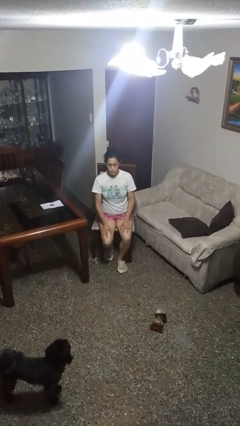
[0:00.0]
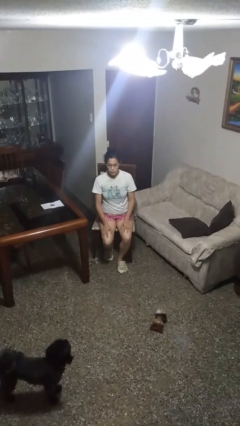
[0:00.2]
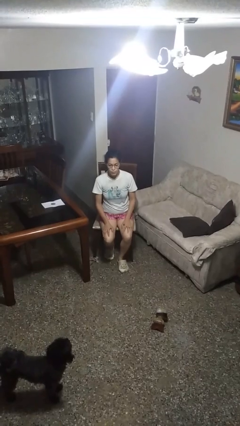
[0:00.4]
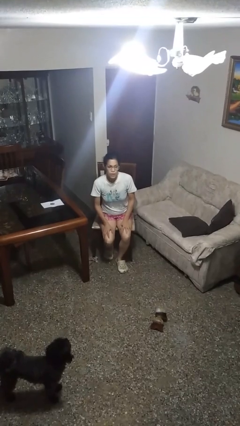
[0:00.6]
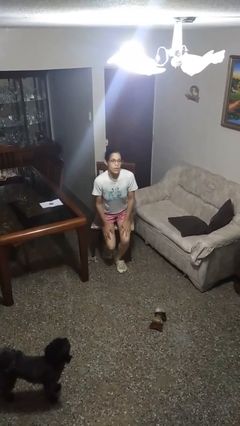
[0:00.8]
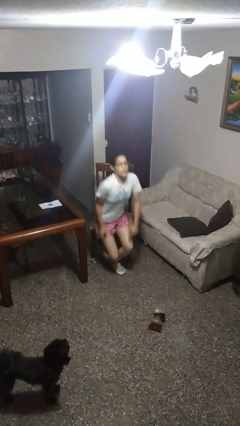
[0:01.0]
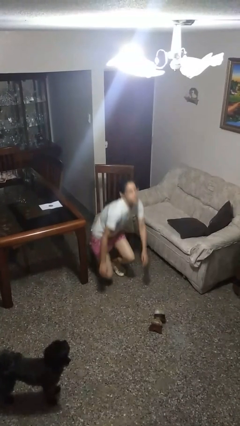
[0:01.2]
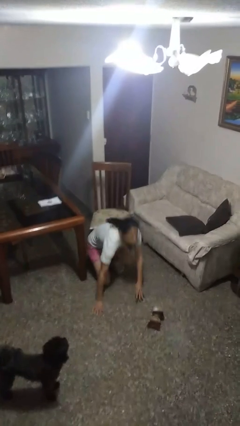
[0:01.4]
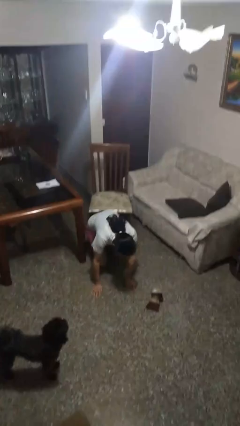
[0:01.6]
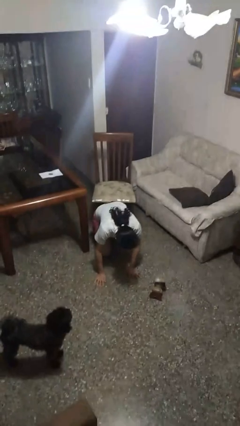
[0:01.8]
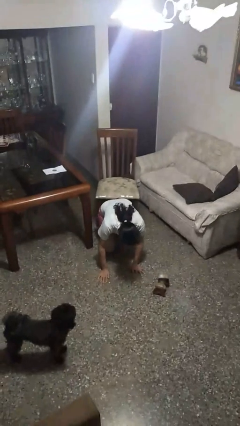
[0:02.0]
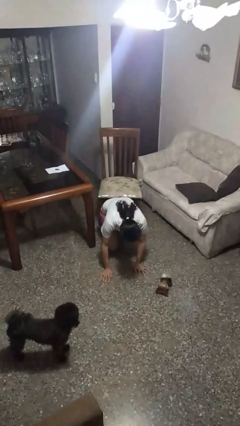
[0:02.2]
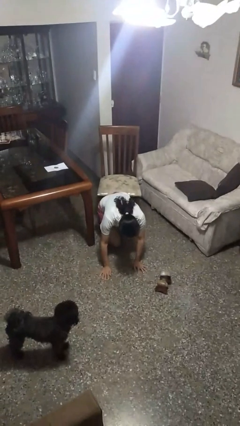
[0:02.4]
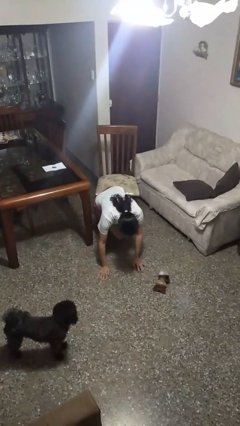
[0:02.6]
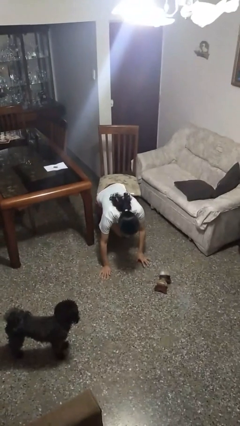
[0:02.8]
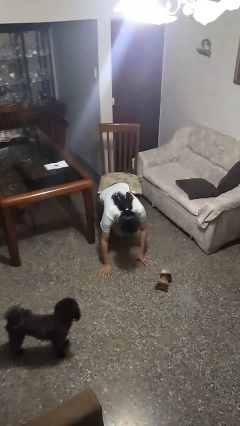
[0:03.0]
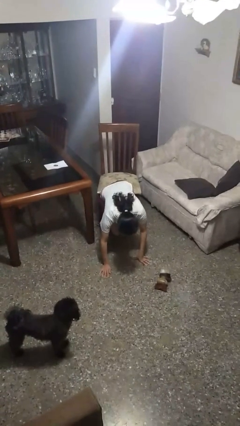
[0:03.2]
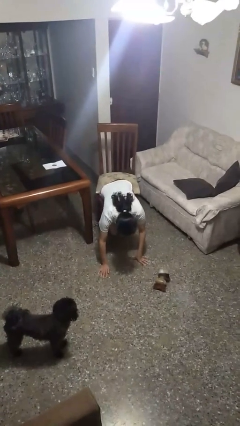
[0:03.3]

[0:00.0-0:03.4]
person falls from chair

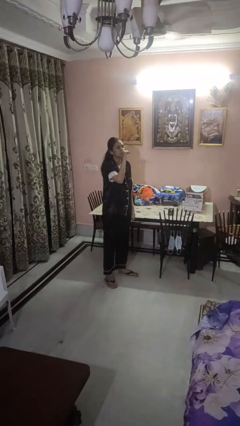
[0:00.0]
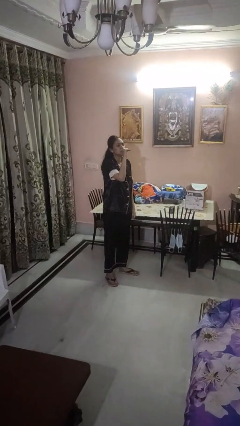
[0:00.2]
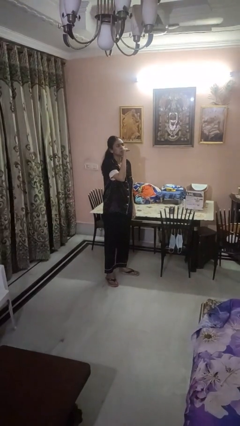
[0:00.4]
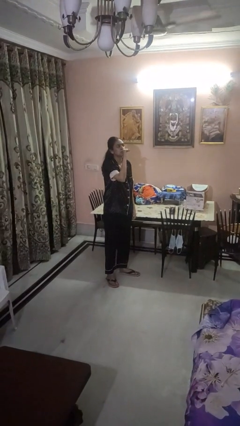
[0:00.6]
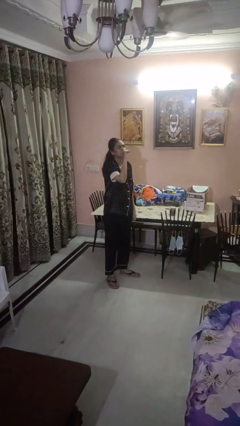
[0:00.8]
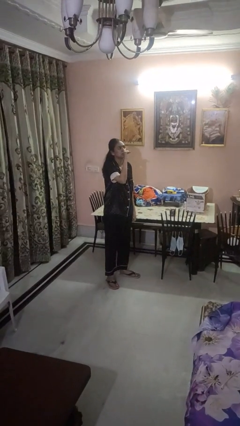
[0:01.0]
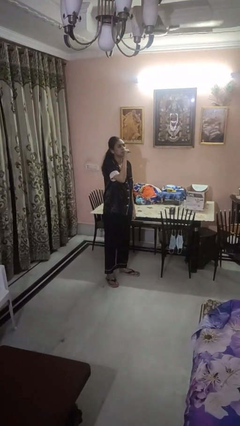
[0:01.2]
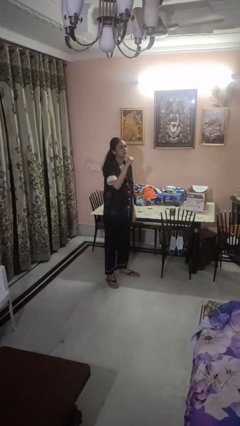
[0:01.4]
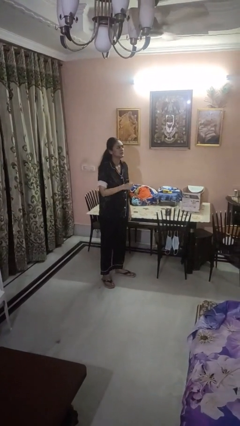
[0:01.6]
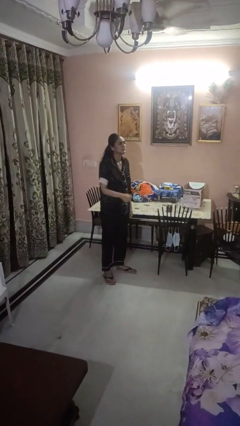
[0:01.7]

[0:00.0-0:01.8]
person vapes

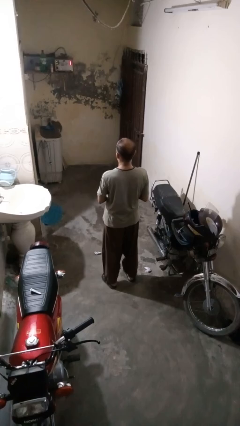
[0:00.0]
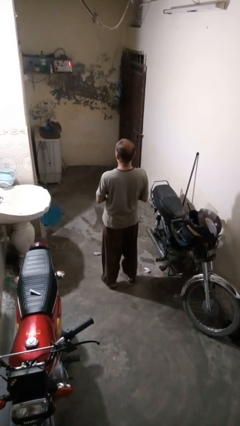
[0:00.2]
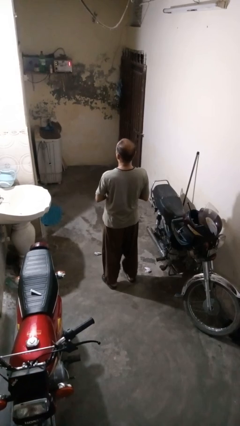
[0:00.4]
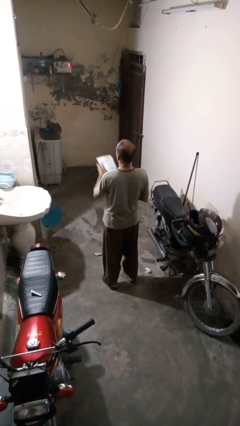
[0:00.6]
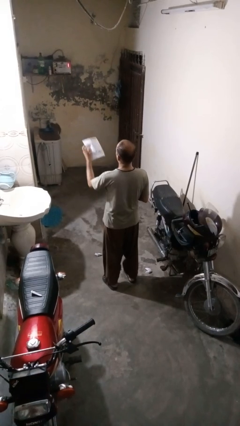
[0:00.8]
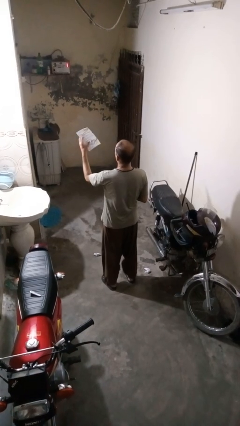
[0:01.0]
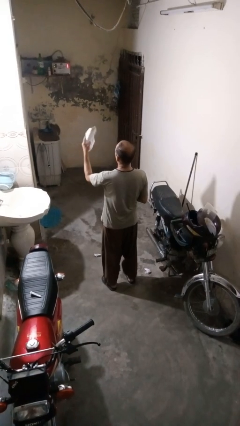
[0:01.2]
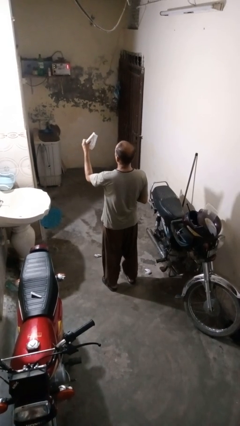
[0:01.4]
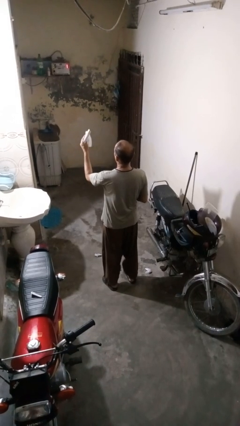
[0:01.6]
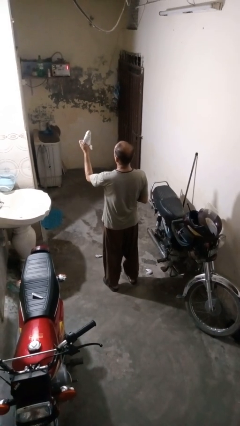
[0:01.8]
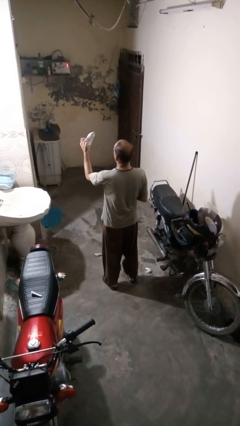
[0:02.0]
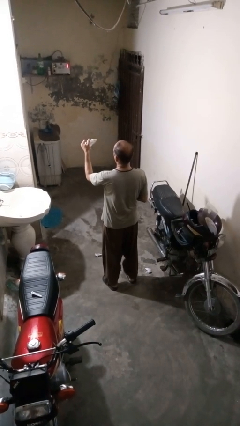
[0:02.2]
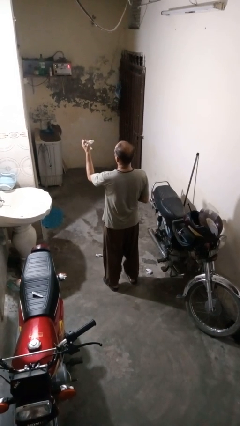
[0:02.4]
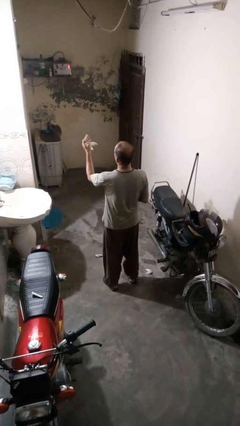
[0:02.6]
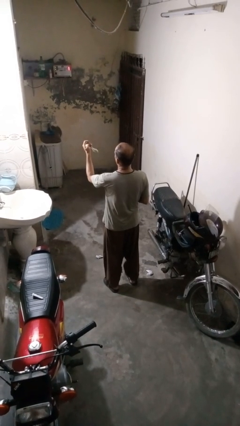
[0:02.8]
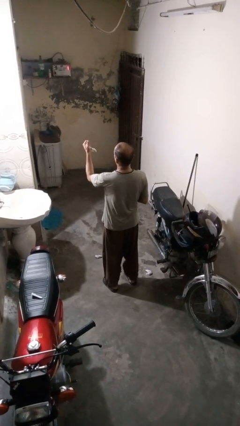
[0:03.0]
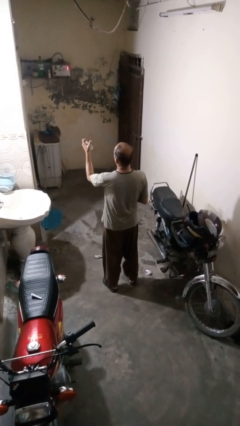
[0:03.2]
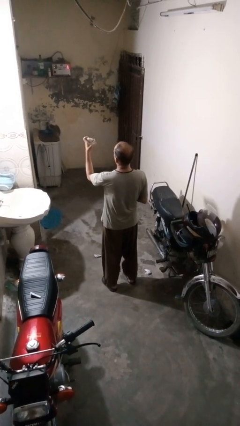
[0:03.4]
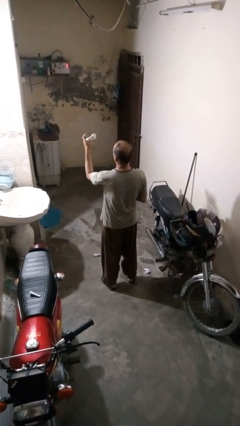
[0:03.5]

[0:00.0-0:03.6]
person crumples paper

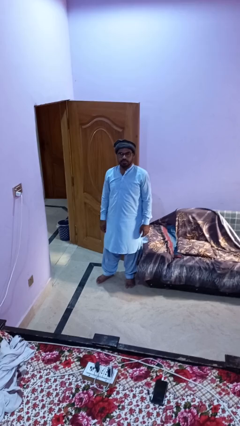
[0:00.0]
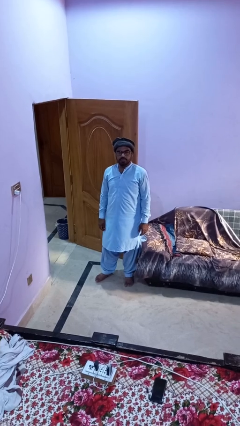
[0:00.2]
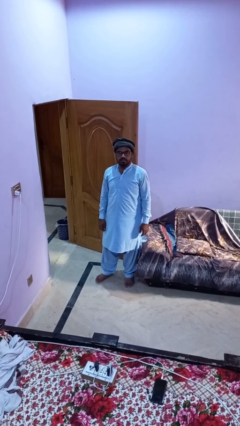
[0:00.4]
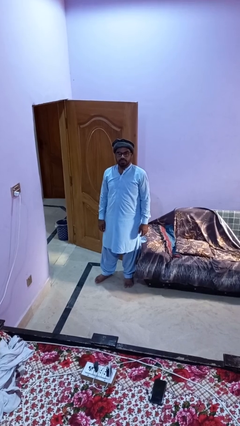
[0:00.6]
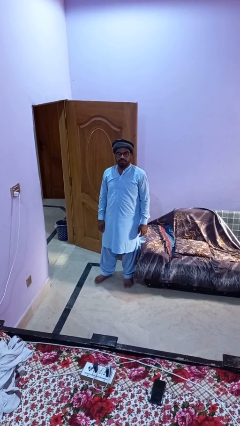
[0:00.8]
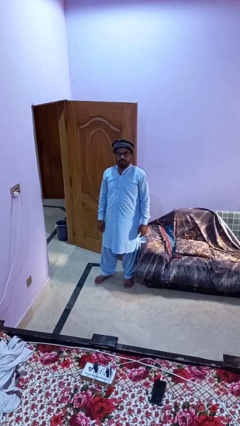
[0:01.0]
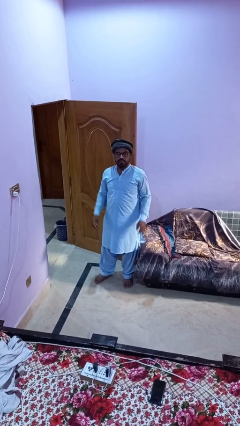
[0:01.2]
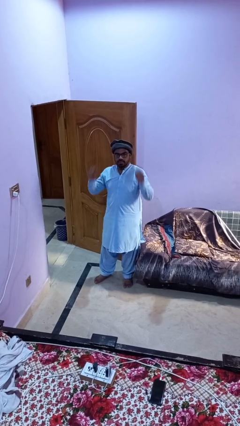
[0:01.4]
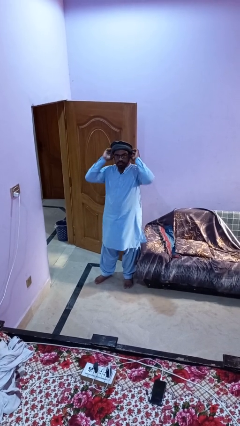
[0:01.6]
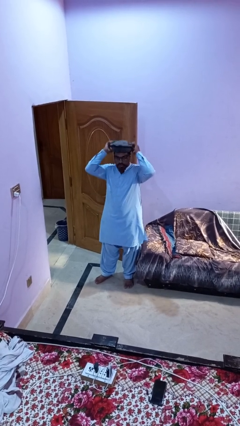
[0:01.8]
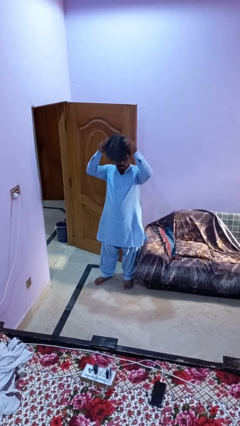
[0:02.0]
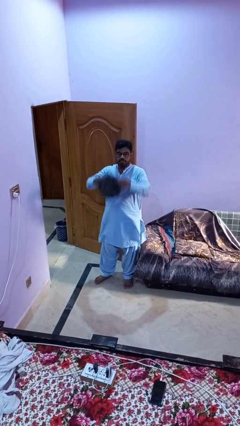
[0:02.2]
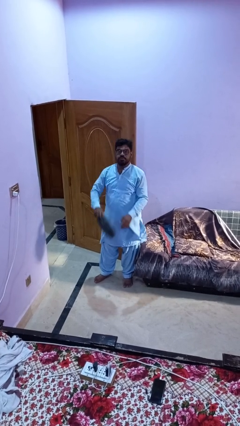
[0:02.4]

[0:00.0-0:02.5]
person takes off hat

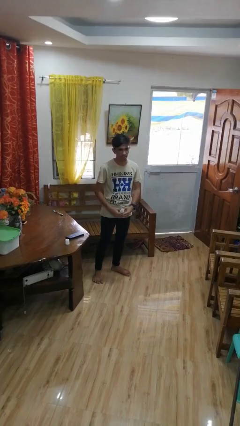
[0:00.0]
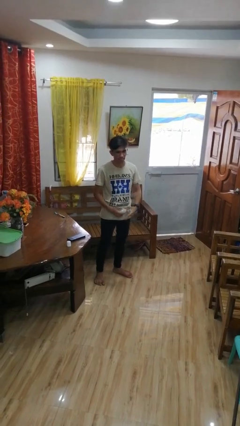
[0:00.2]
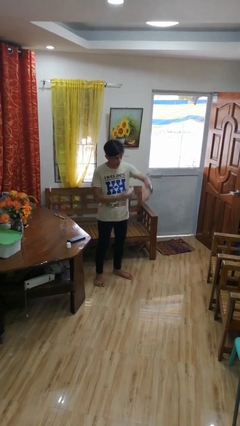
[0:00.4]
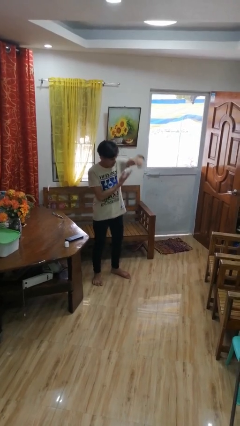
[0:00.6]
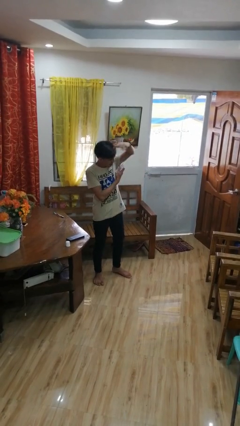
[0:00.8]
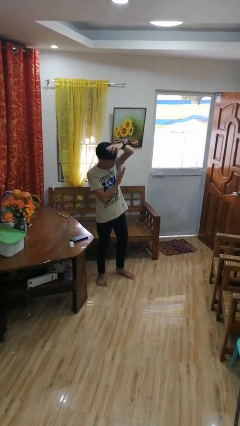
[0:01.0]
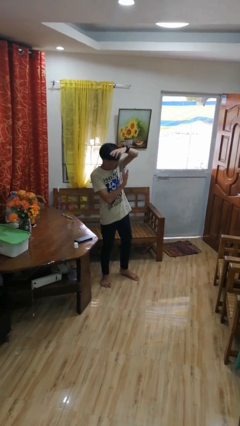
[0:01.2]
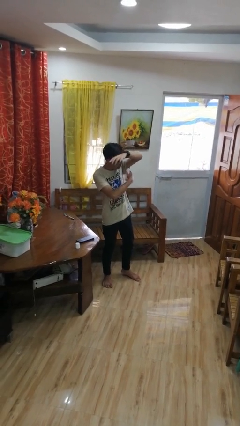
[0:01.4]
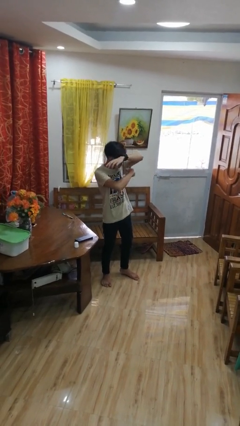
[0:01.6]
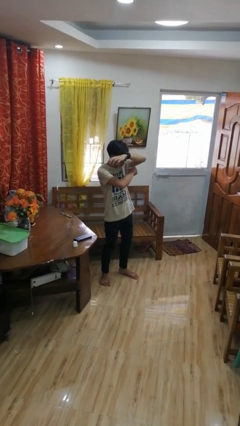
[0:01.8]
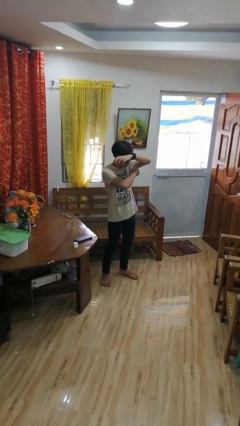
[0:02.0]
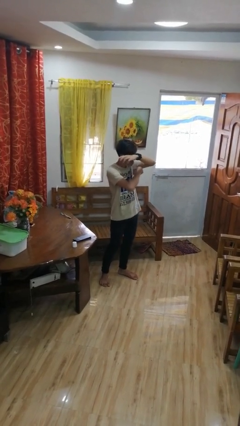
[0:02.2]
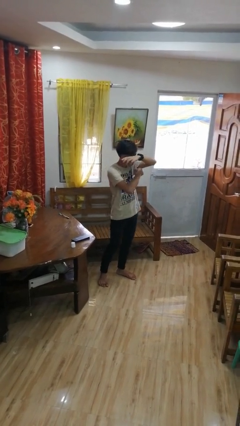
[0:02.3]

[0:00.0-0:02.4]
person applies deodorant

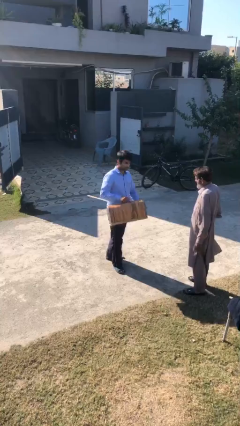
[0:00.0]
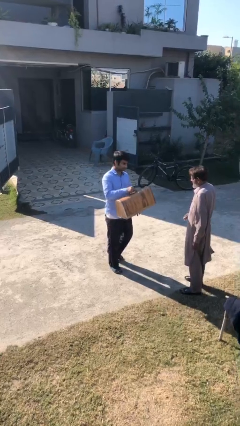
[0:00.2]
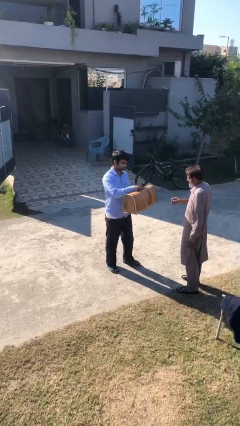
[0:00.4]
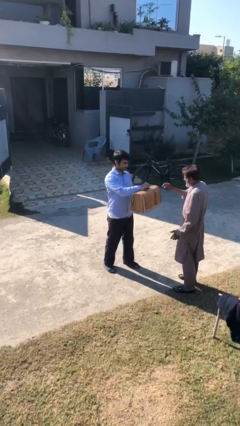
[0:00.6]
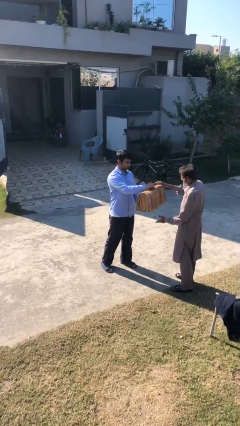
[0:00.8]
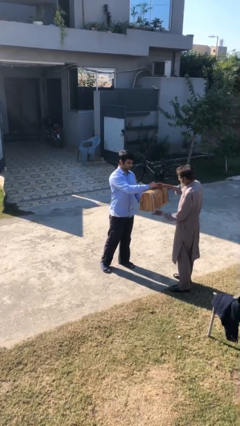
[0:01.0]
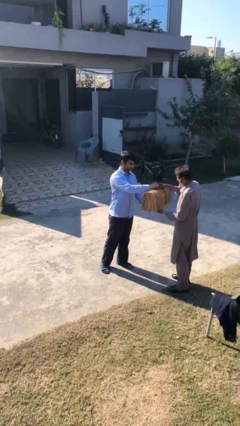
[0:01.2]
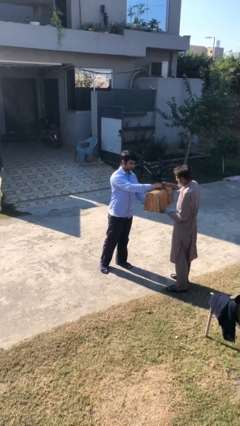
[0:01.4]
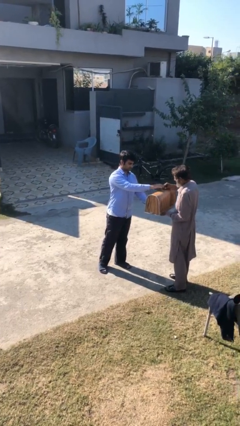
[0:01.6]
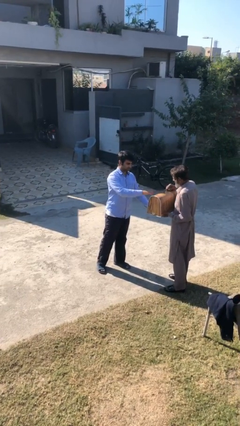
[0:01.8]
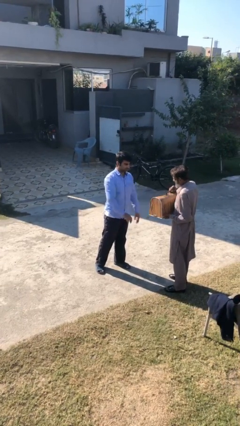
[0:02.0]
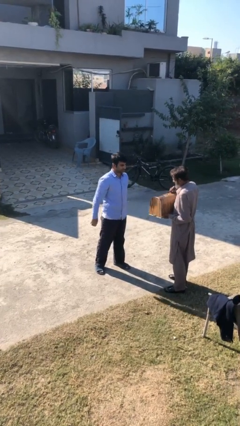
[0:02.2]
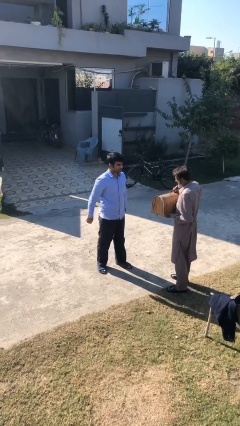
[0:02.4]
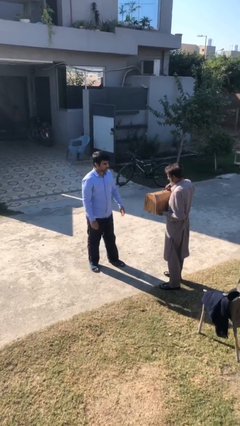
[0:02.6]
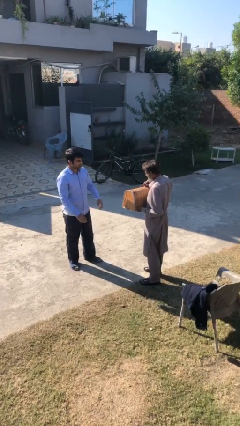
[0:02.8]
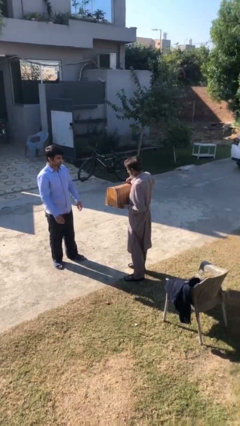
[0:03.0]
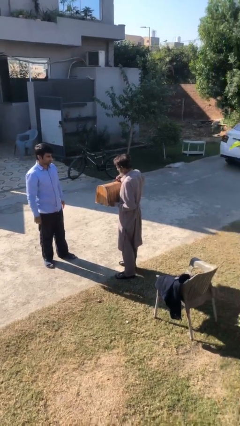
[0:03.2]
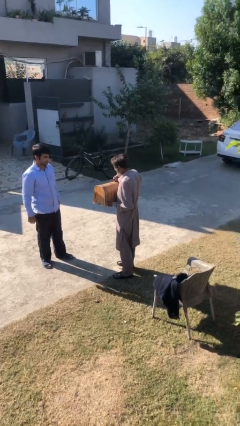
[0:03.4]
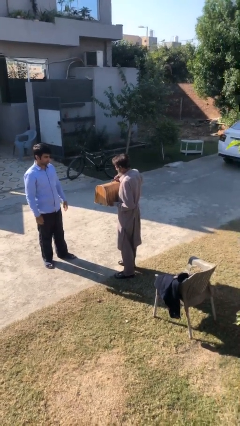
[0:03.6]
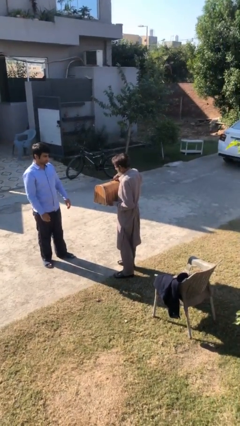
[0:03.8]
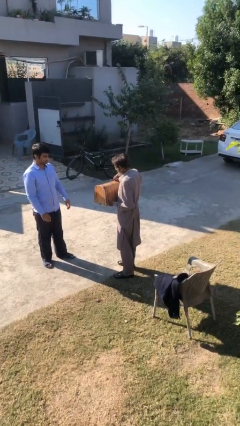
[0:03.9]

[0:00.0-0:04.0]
person transfers object to person
